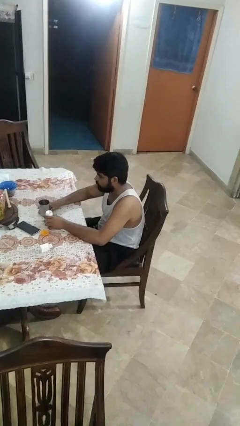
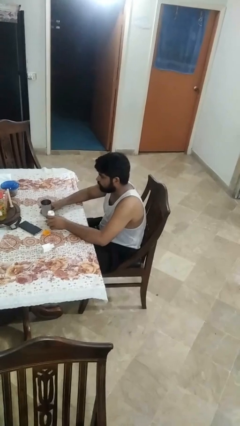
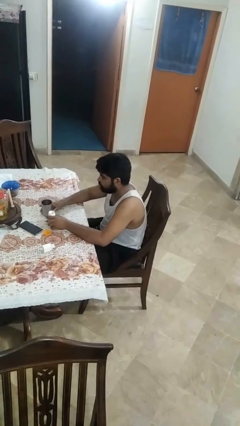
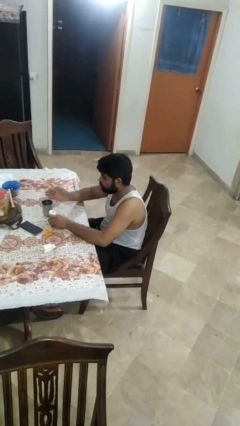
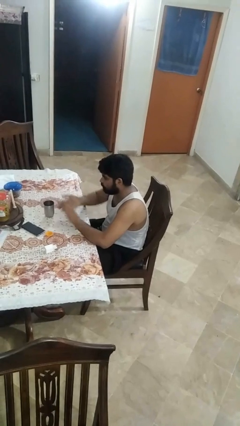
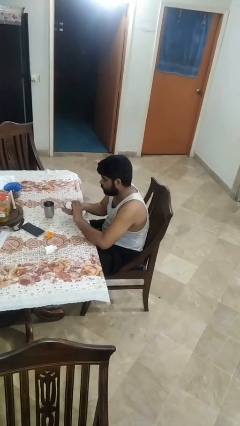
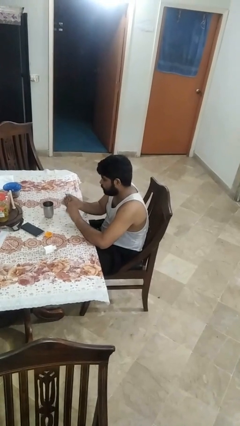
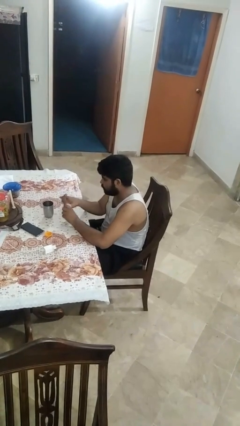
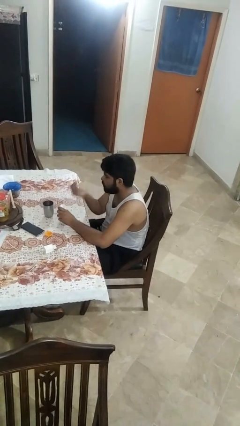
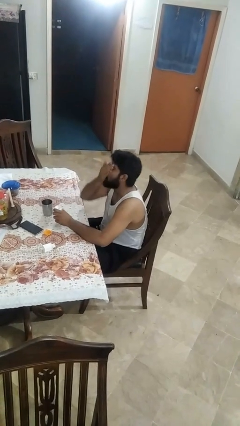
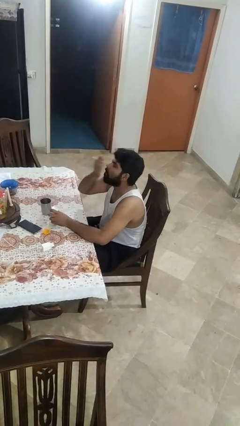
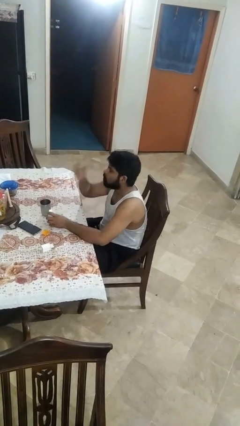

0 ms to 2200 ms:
person takes medicine pills

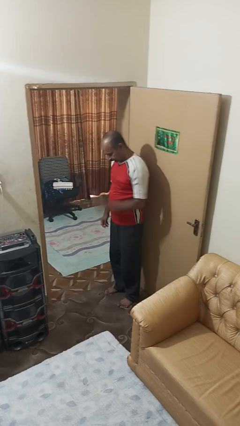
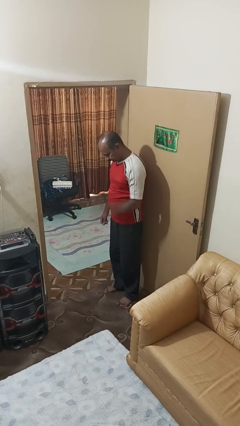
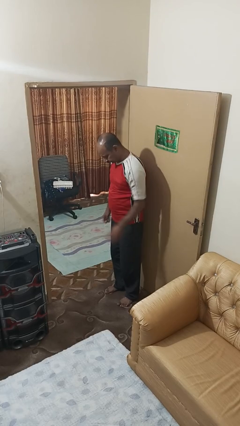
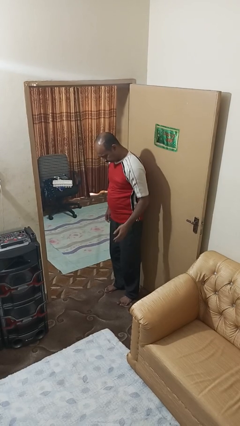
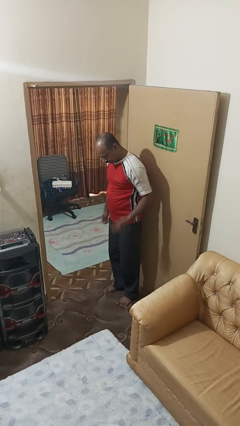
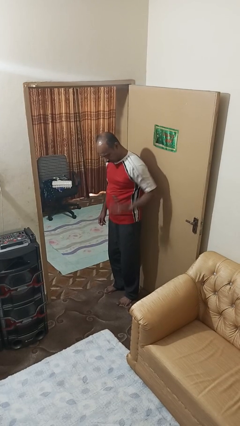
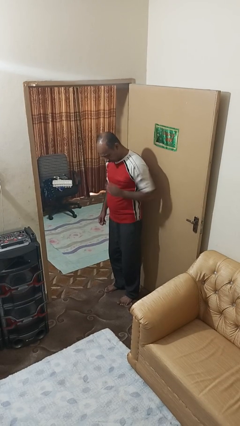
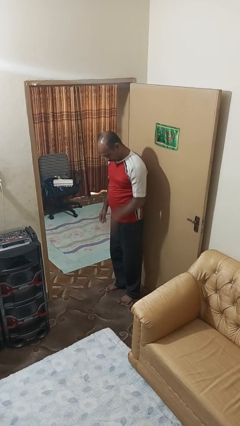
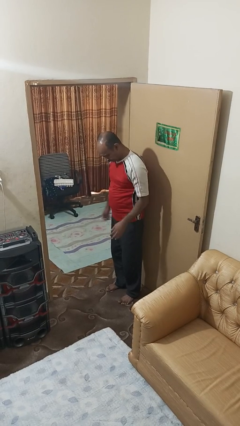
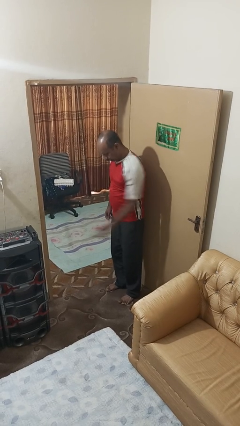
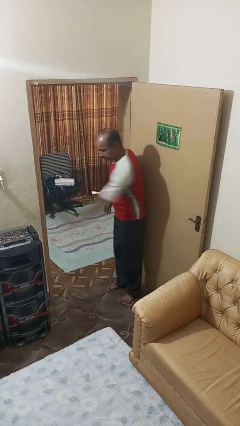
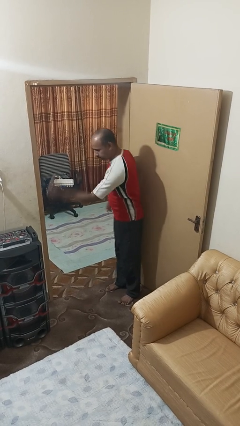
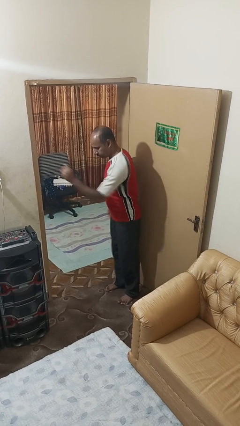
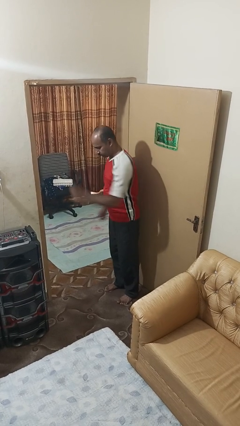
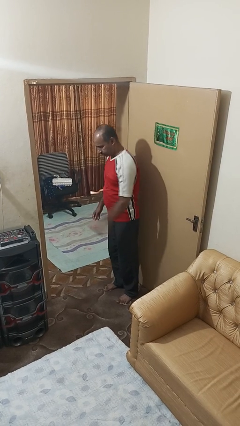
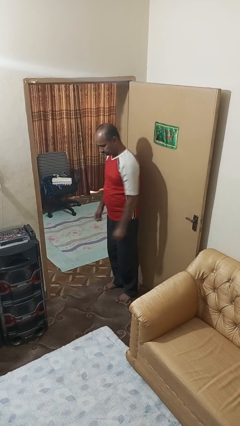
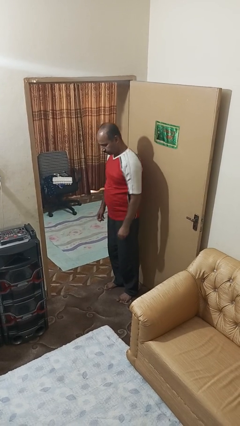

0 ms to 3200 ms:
person bounces ball on floor

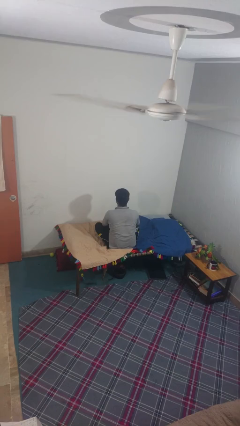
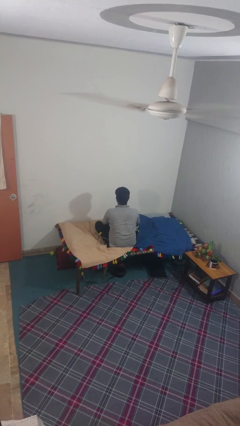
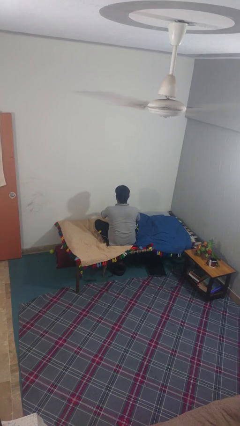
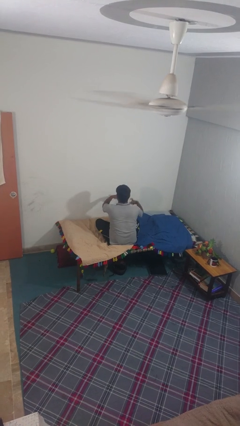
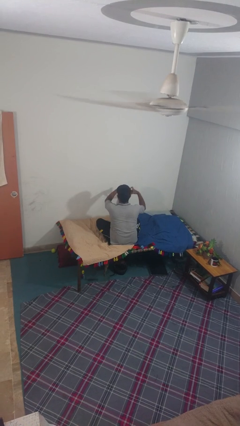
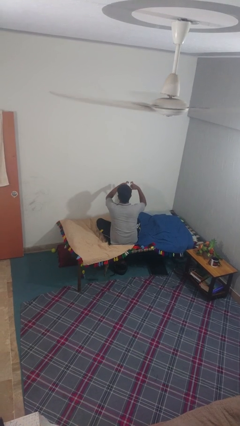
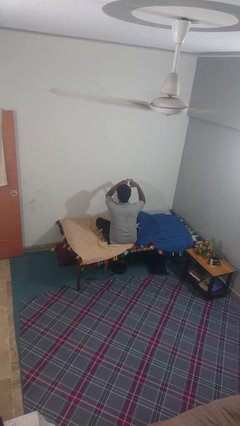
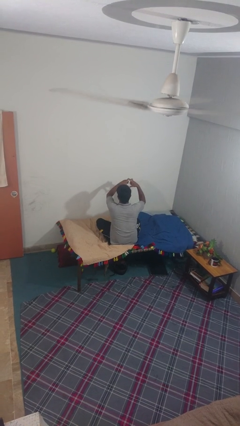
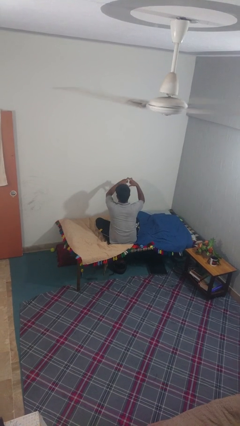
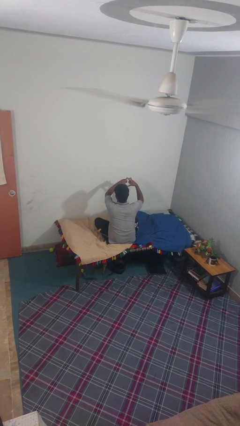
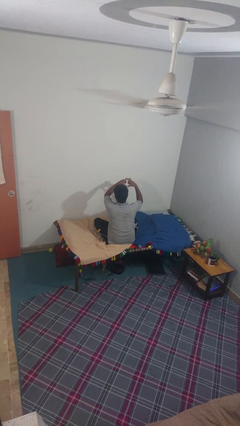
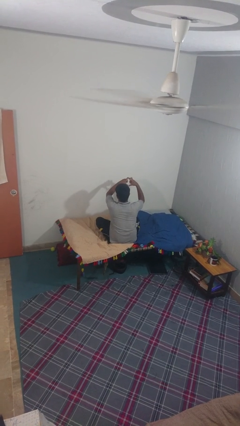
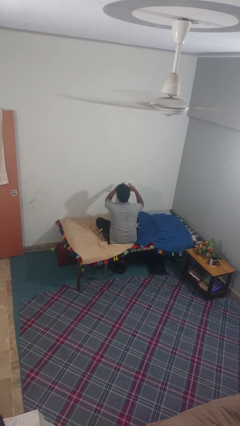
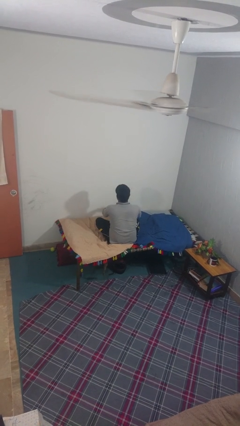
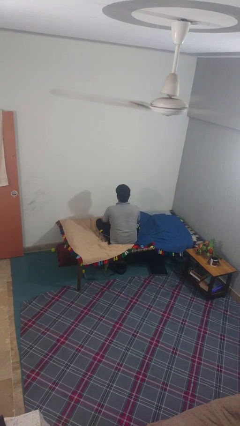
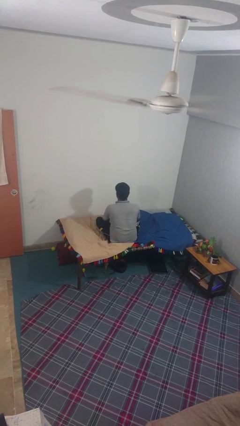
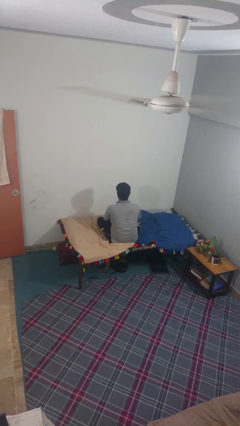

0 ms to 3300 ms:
person gestures heart

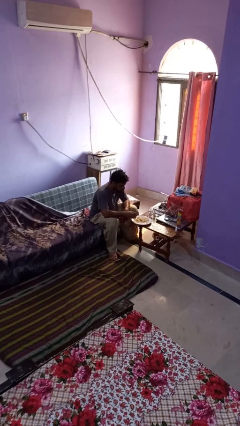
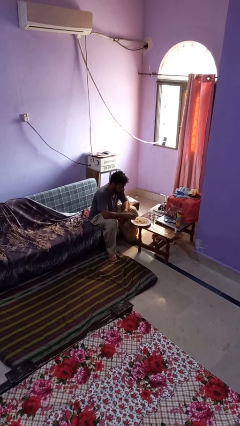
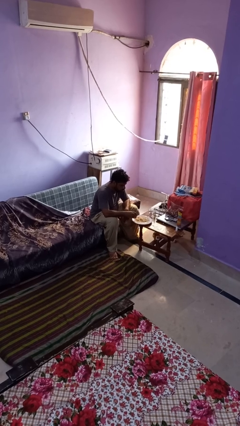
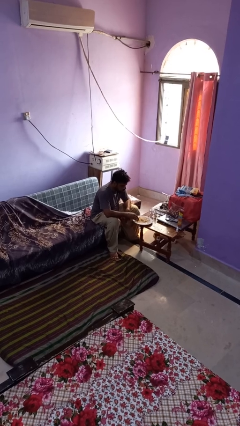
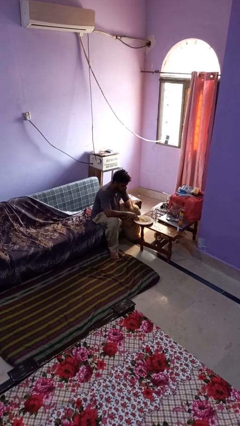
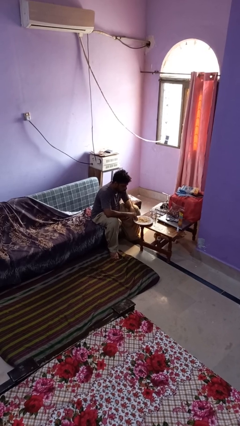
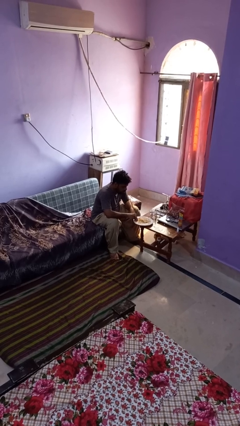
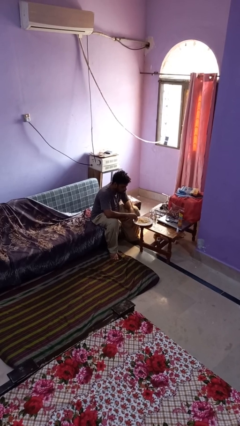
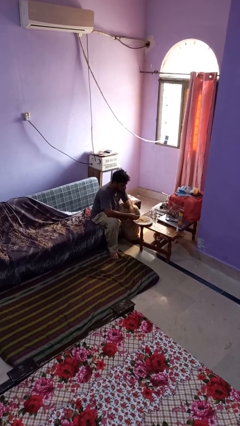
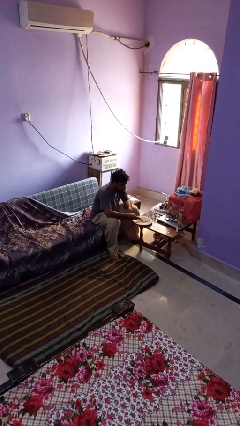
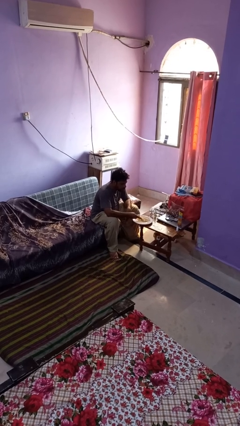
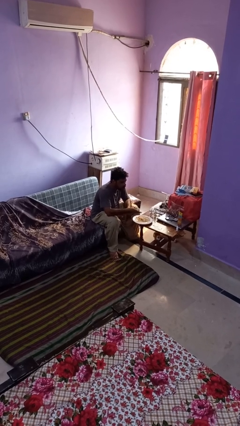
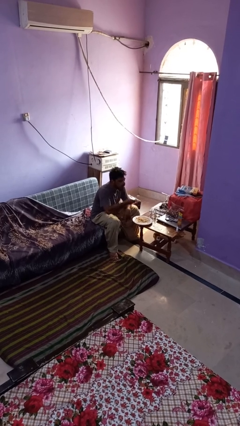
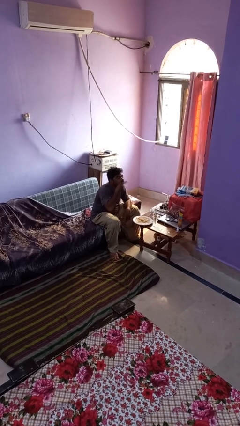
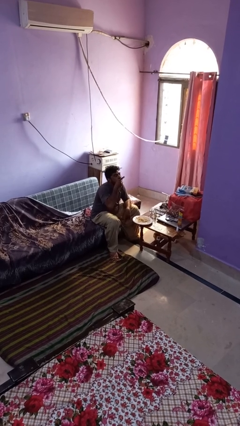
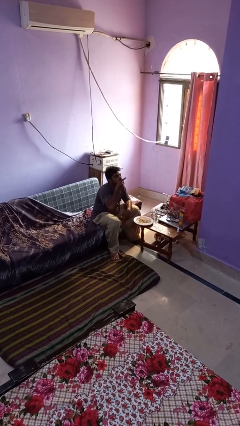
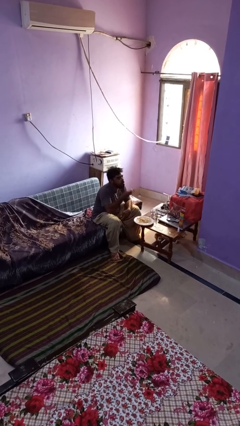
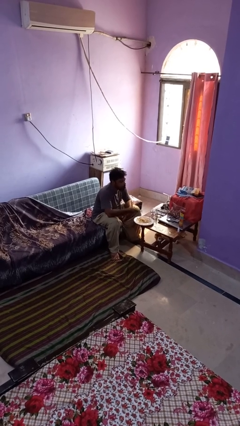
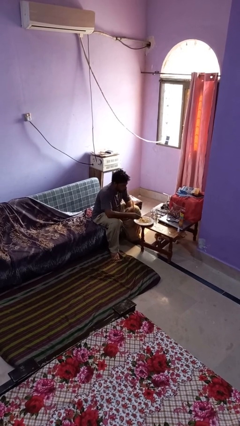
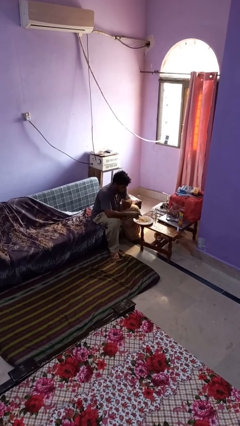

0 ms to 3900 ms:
person eats with hands

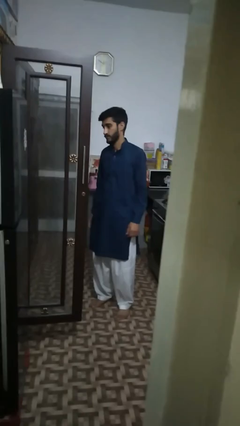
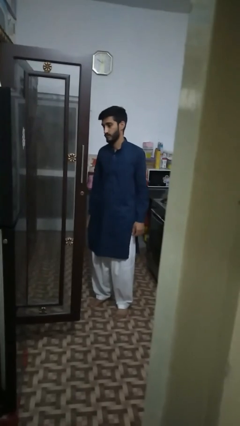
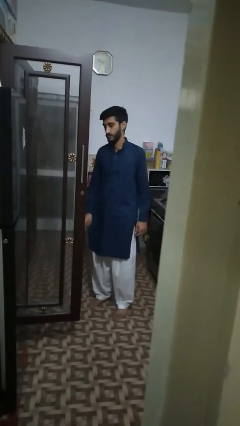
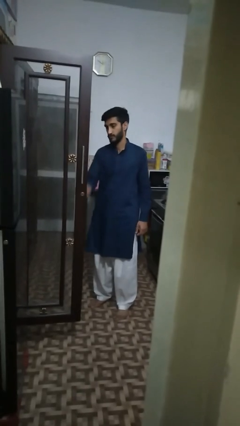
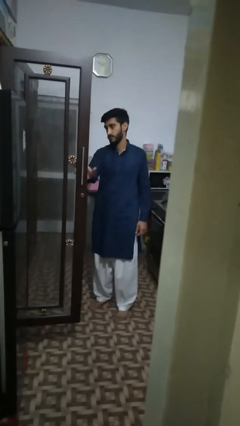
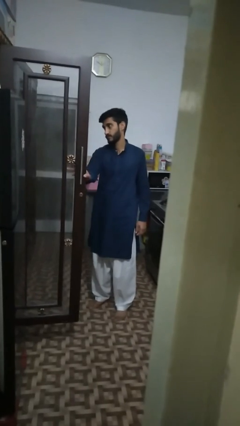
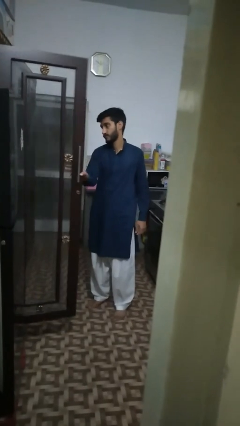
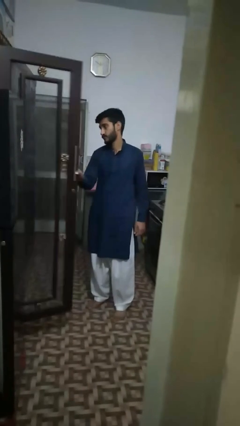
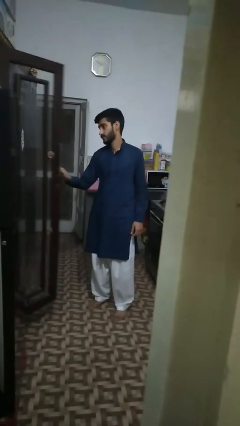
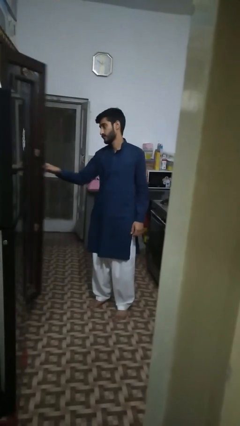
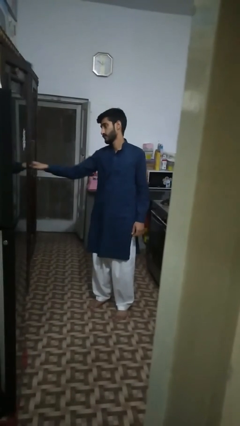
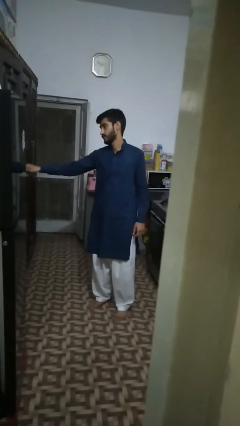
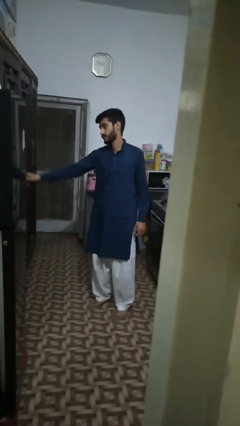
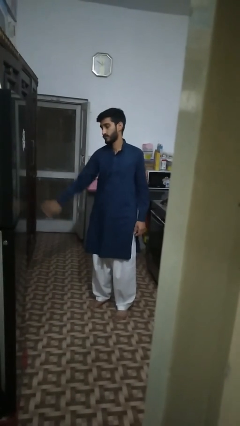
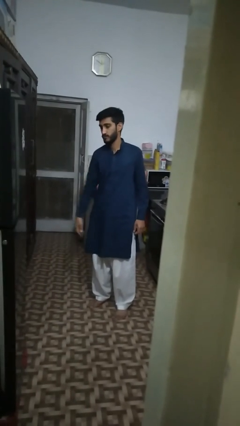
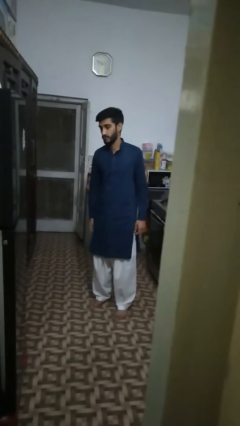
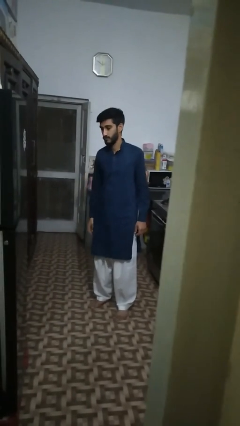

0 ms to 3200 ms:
person closes cabinet

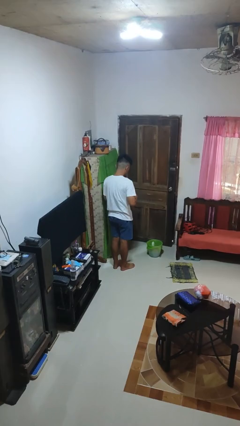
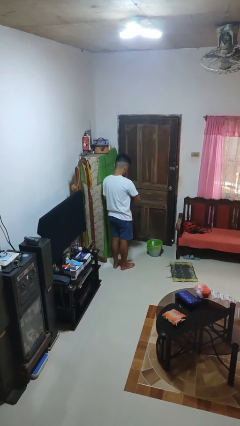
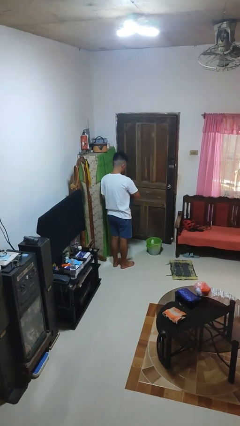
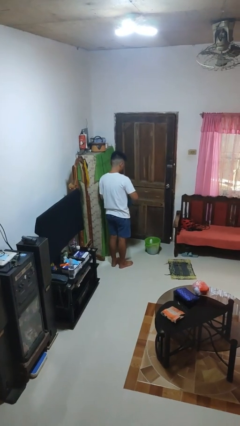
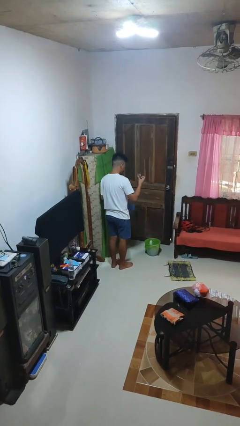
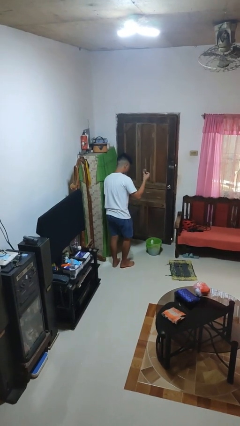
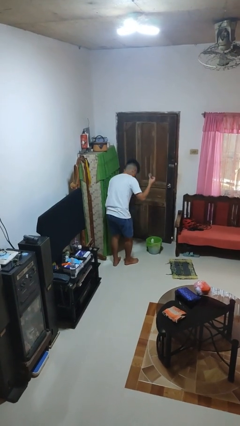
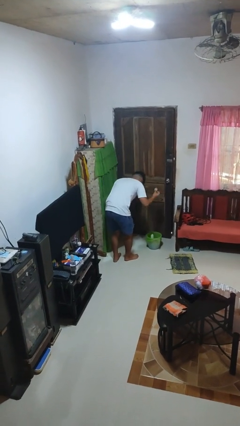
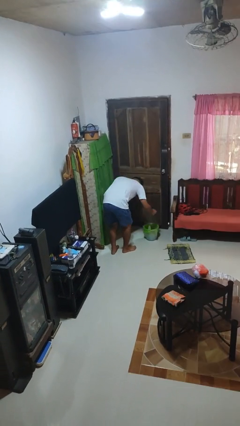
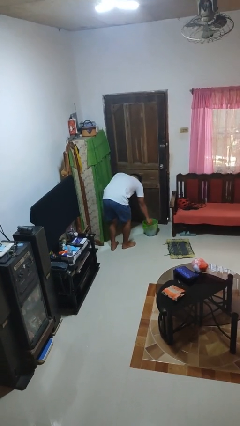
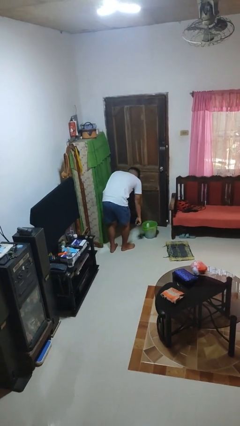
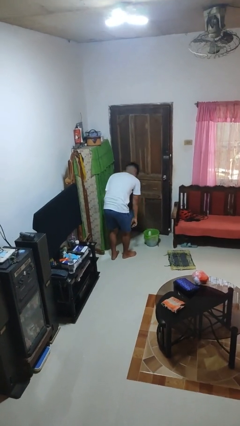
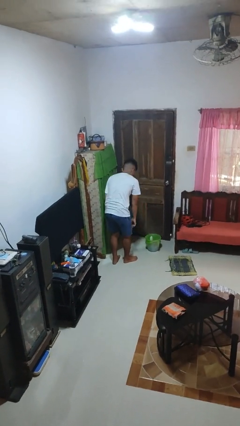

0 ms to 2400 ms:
person discards trash
